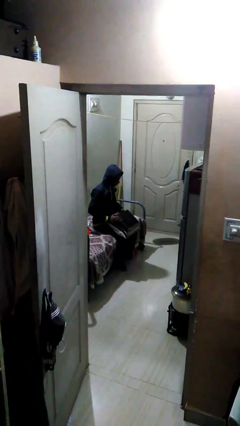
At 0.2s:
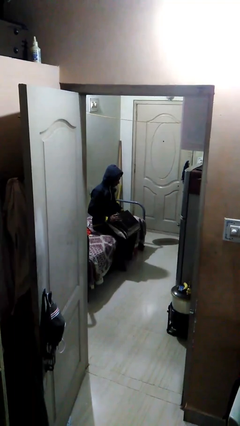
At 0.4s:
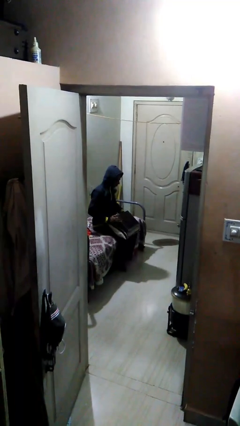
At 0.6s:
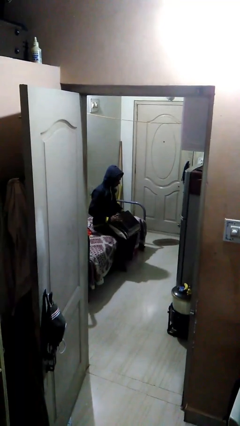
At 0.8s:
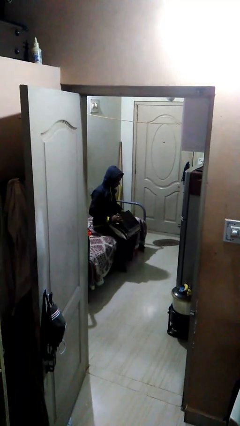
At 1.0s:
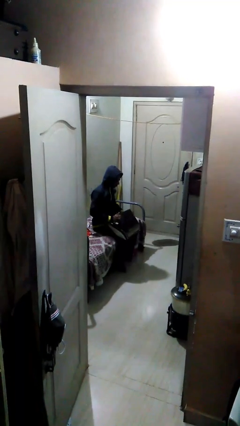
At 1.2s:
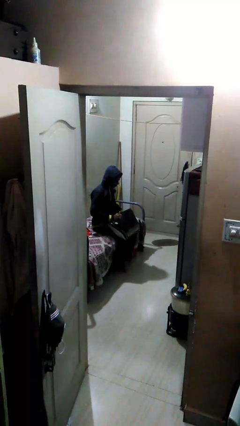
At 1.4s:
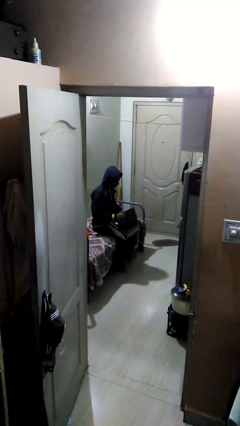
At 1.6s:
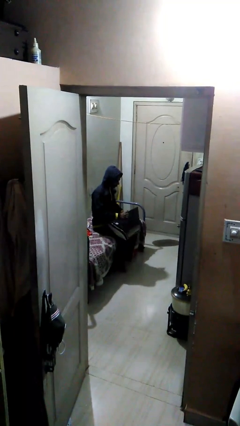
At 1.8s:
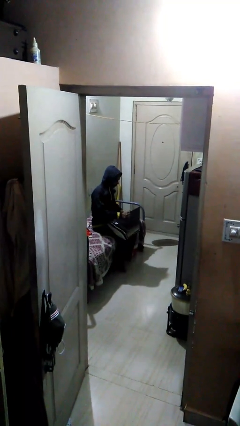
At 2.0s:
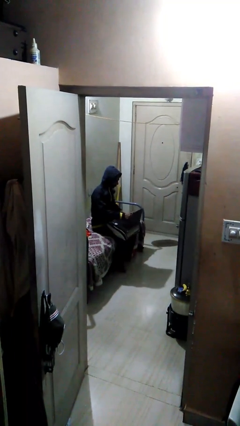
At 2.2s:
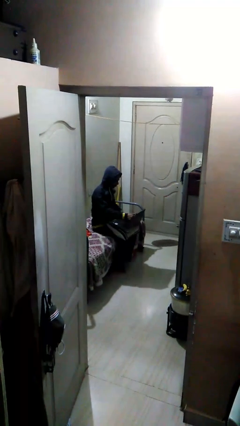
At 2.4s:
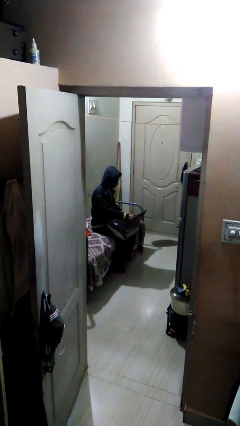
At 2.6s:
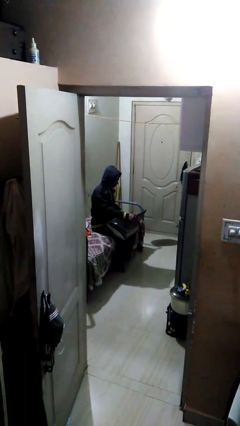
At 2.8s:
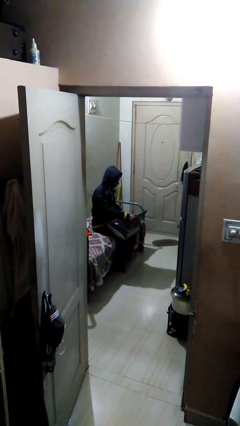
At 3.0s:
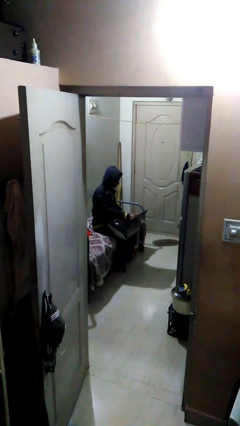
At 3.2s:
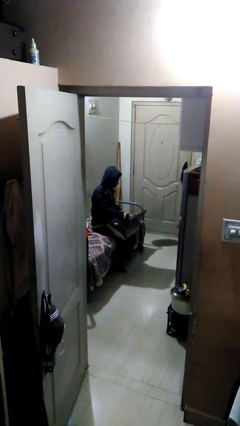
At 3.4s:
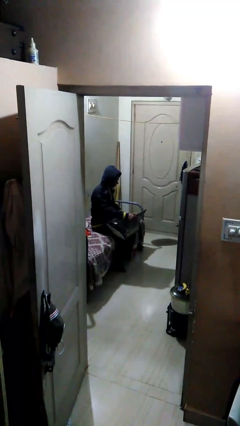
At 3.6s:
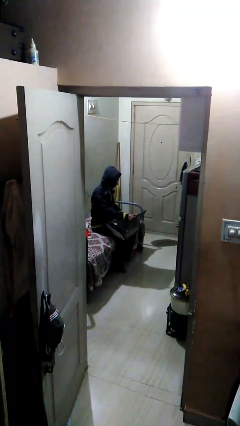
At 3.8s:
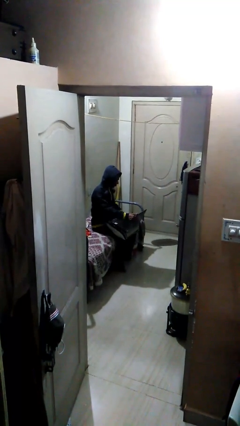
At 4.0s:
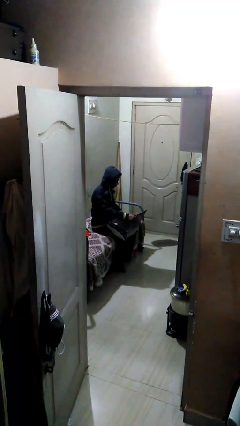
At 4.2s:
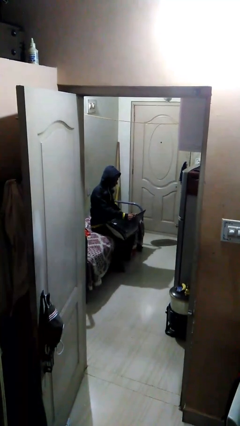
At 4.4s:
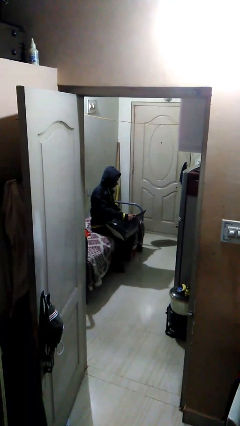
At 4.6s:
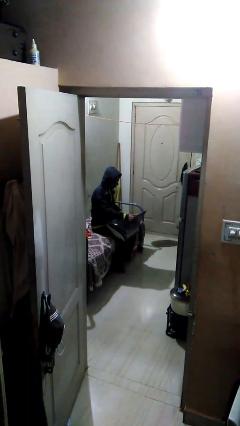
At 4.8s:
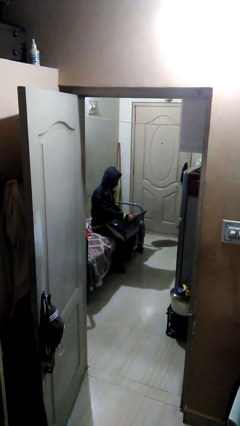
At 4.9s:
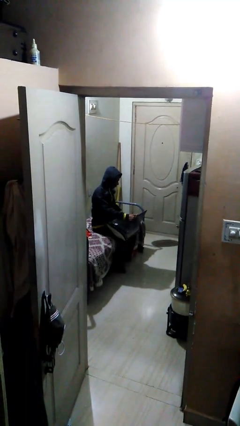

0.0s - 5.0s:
person interacts with laptop

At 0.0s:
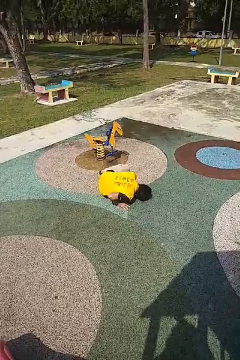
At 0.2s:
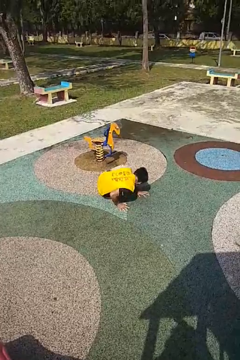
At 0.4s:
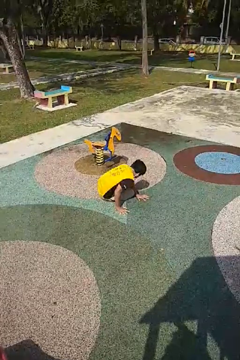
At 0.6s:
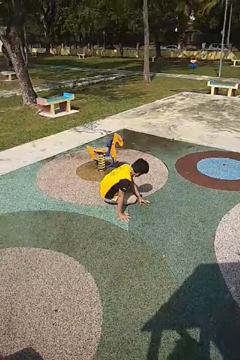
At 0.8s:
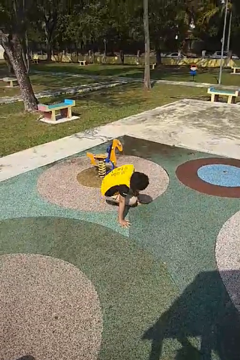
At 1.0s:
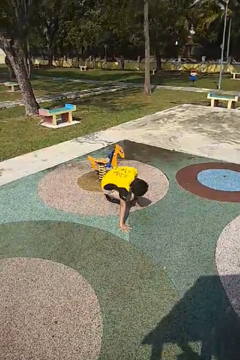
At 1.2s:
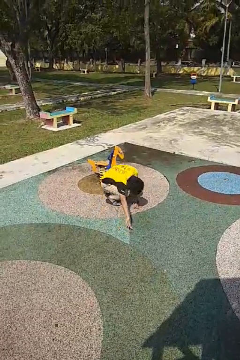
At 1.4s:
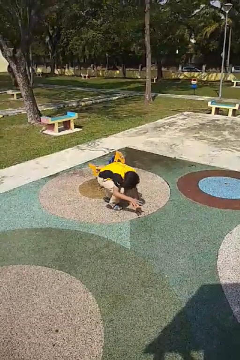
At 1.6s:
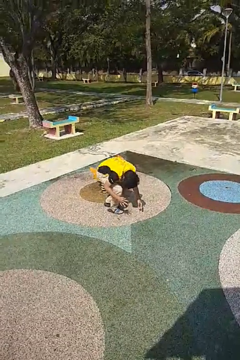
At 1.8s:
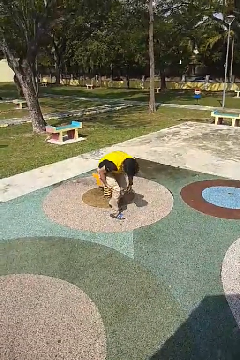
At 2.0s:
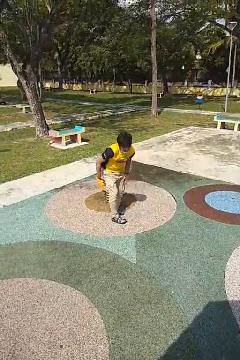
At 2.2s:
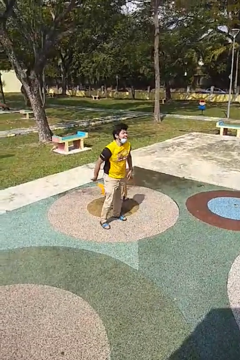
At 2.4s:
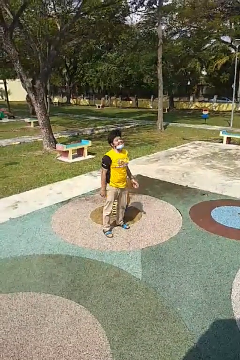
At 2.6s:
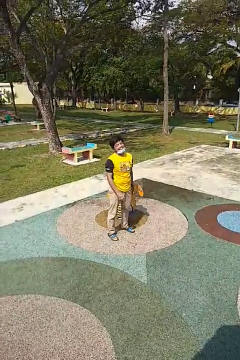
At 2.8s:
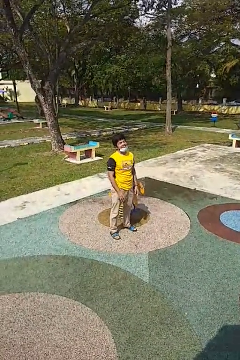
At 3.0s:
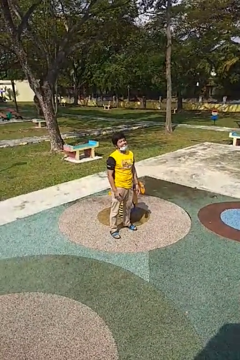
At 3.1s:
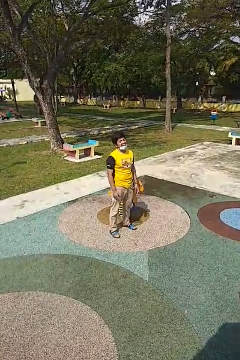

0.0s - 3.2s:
person stands up from floor

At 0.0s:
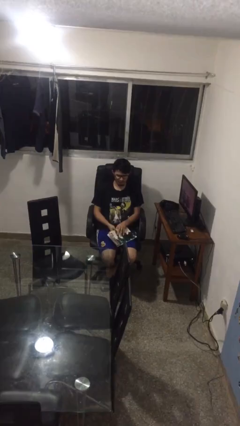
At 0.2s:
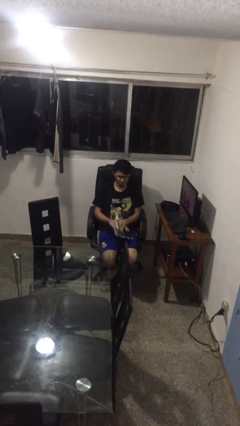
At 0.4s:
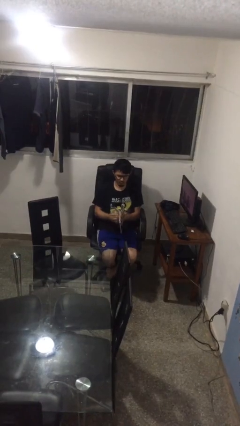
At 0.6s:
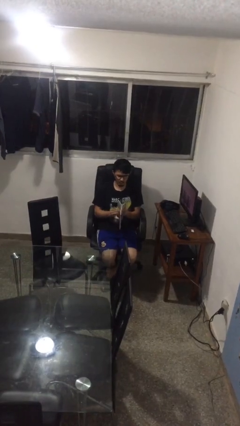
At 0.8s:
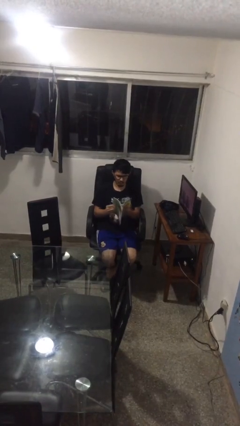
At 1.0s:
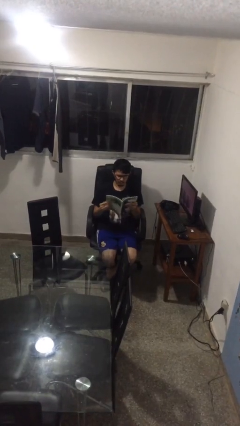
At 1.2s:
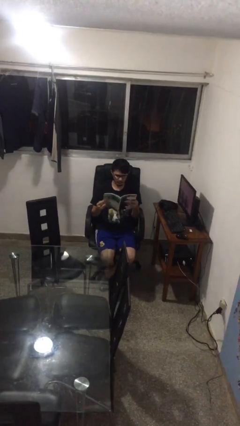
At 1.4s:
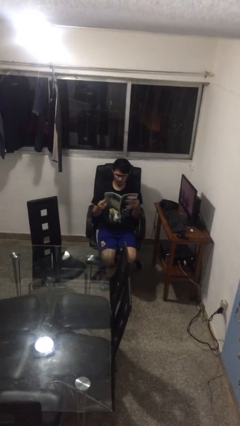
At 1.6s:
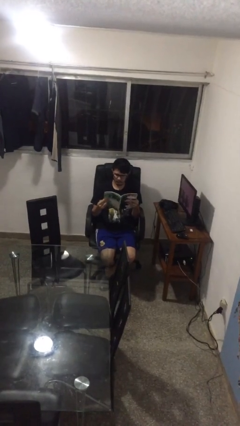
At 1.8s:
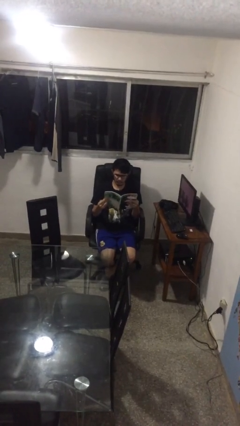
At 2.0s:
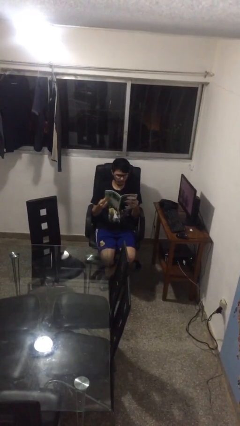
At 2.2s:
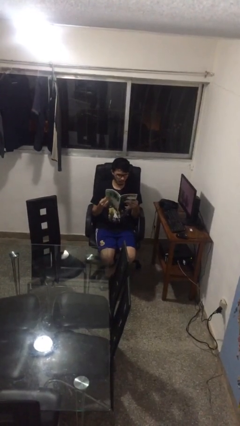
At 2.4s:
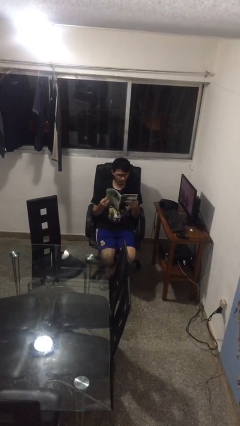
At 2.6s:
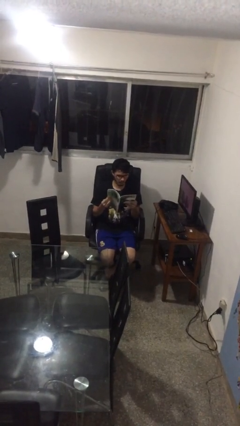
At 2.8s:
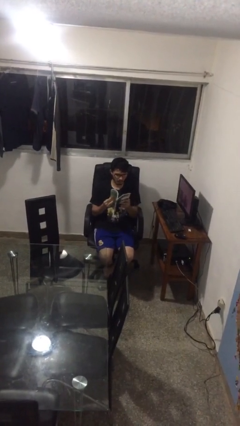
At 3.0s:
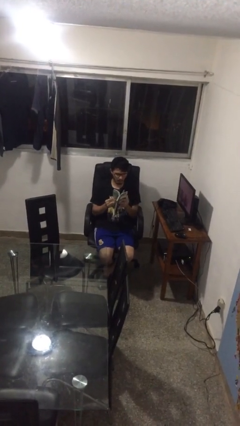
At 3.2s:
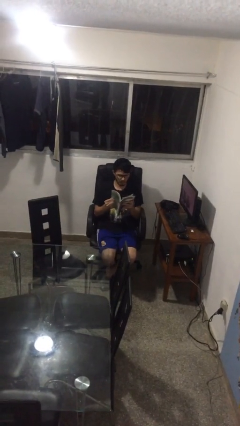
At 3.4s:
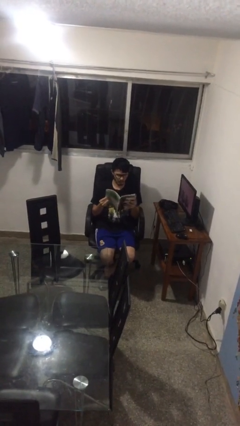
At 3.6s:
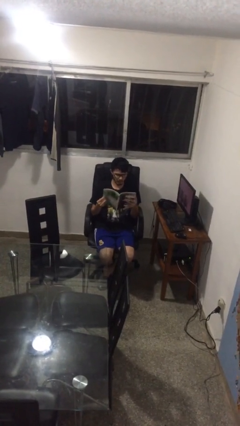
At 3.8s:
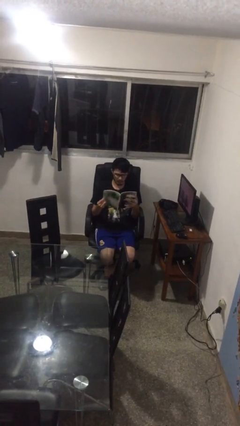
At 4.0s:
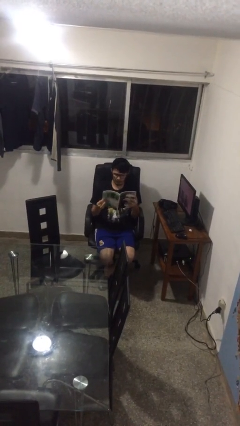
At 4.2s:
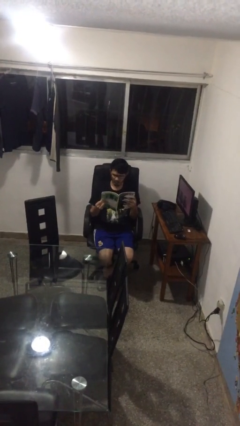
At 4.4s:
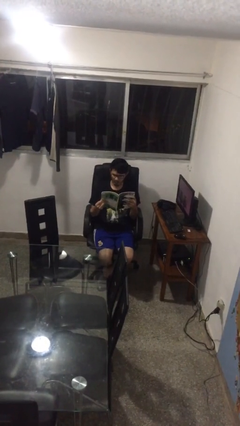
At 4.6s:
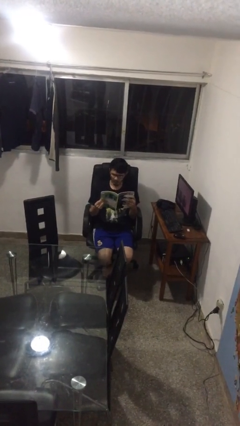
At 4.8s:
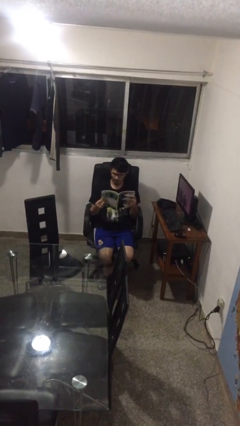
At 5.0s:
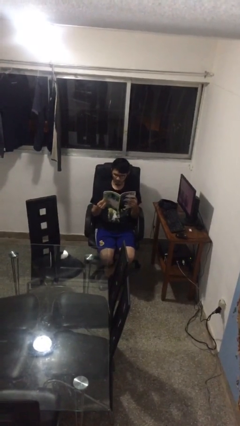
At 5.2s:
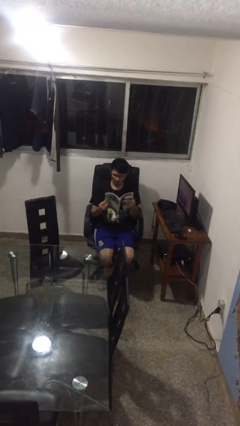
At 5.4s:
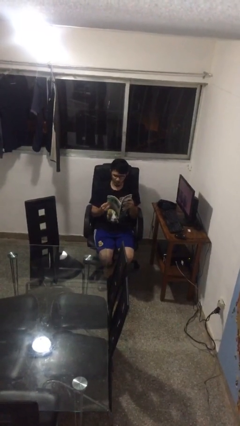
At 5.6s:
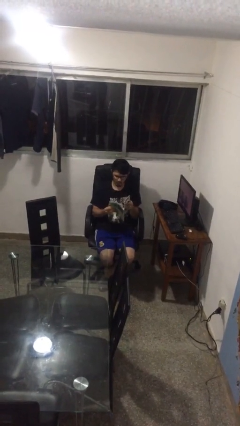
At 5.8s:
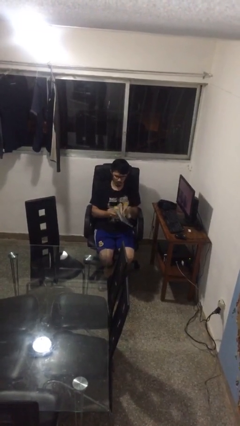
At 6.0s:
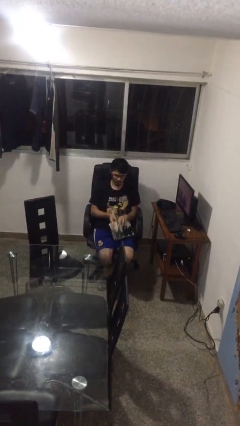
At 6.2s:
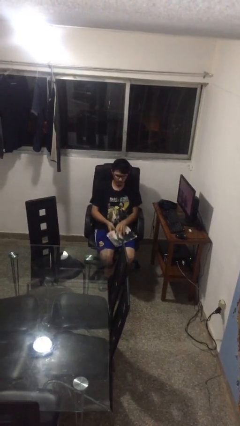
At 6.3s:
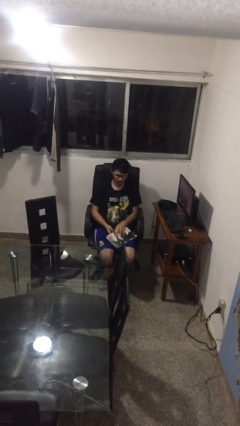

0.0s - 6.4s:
person reads magazine

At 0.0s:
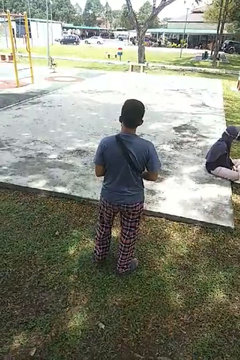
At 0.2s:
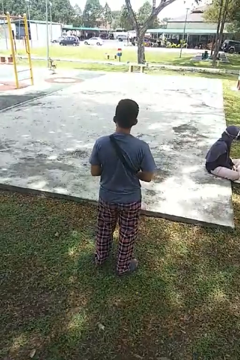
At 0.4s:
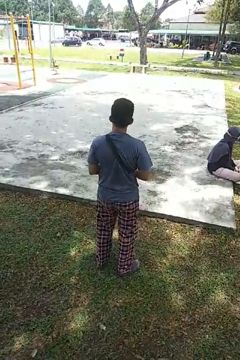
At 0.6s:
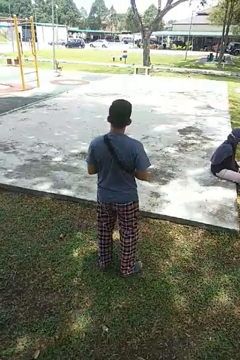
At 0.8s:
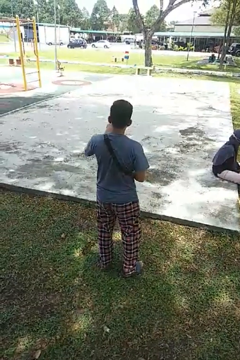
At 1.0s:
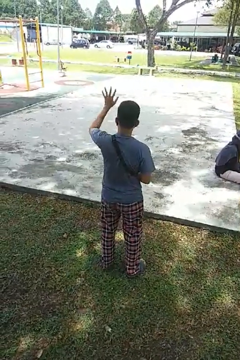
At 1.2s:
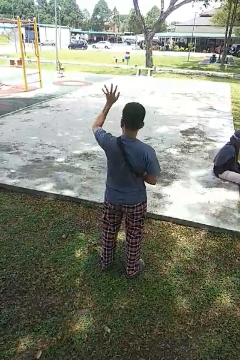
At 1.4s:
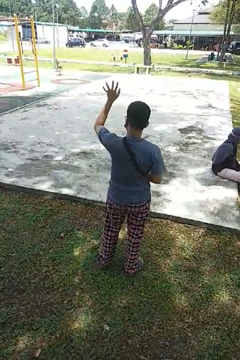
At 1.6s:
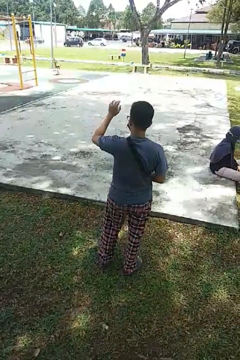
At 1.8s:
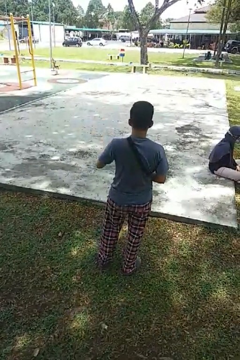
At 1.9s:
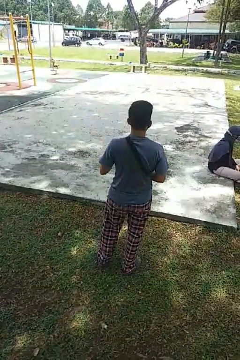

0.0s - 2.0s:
person waves at person

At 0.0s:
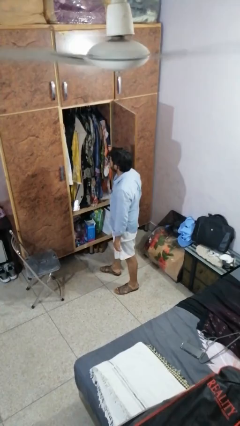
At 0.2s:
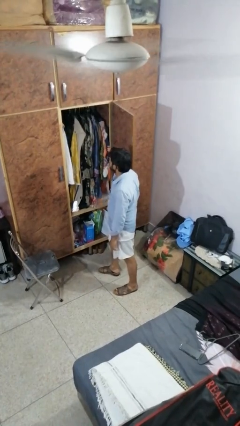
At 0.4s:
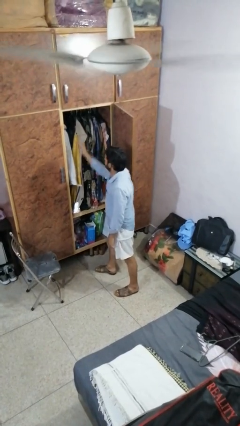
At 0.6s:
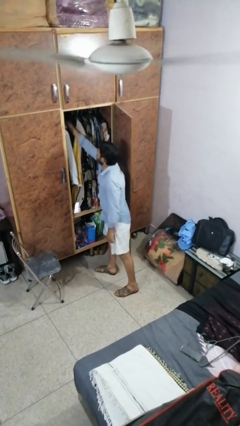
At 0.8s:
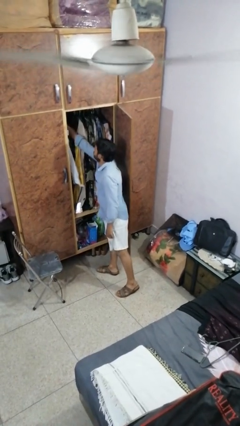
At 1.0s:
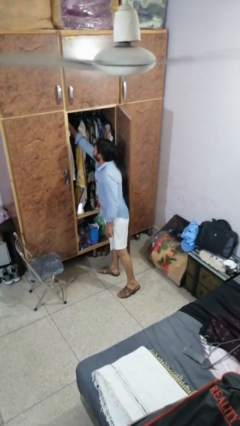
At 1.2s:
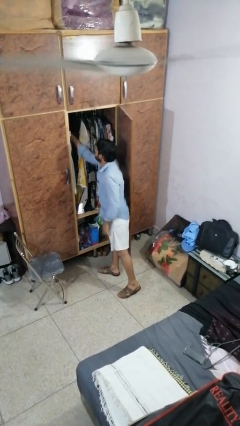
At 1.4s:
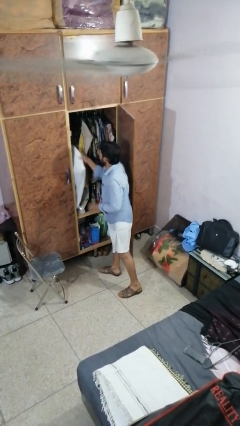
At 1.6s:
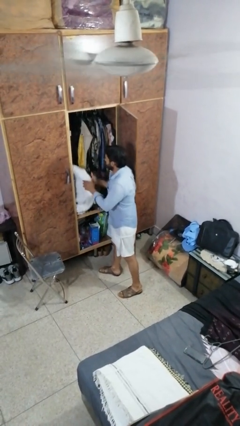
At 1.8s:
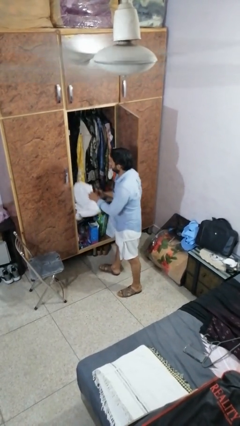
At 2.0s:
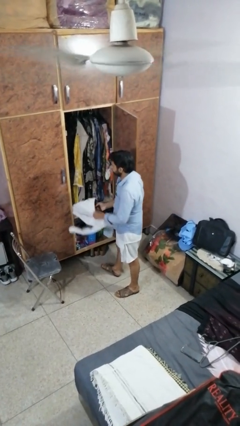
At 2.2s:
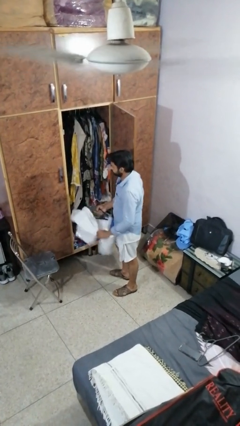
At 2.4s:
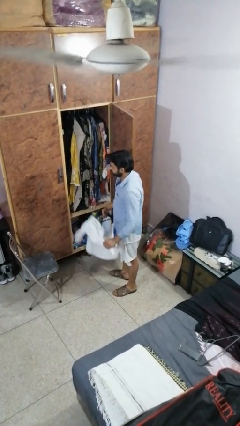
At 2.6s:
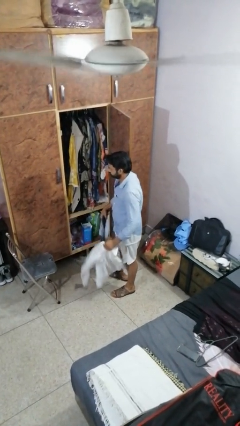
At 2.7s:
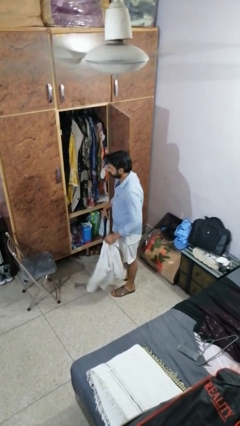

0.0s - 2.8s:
person takes clothes from closet
